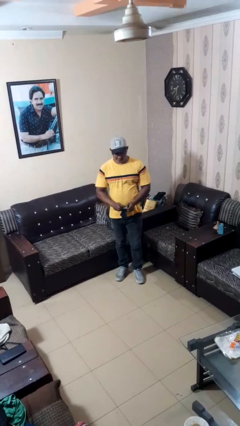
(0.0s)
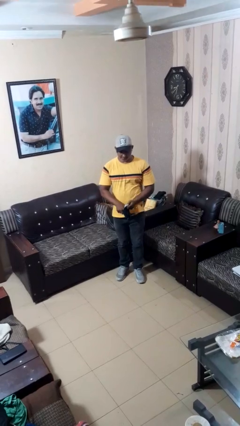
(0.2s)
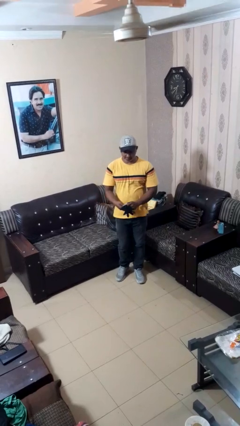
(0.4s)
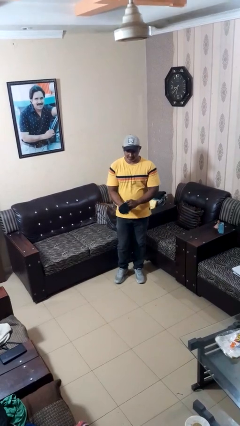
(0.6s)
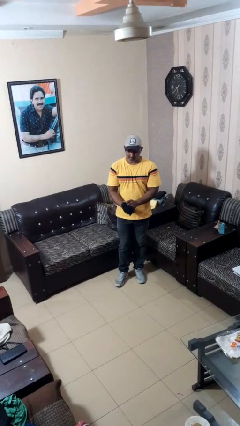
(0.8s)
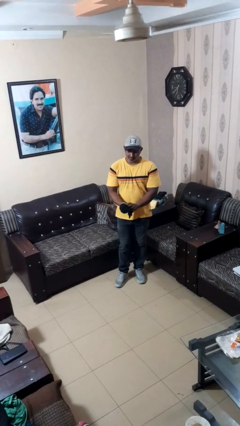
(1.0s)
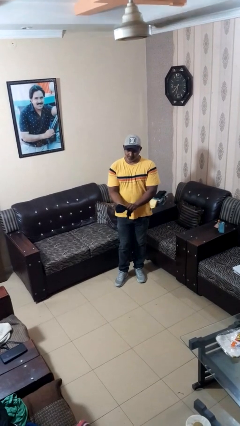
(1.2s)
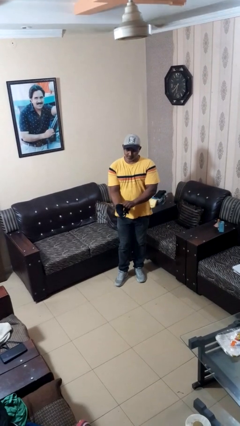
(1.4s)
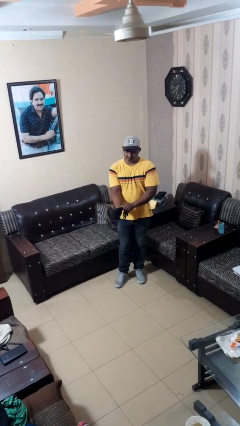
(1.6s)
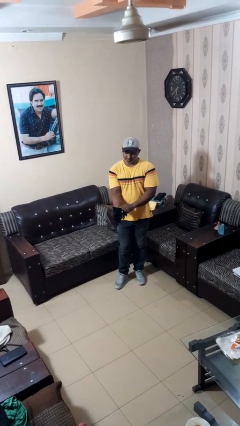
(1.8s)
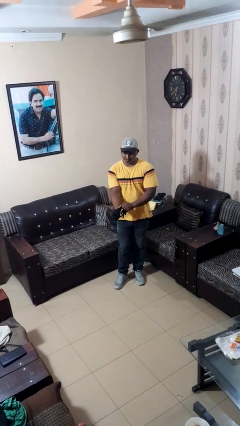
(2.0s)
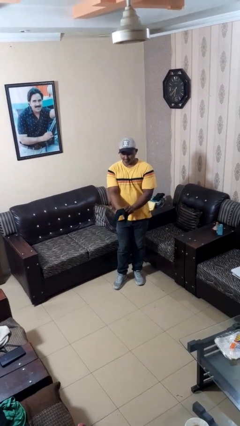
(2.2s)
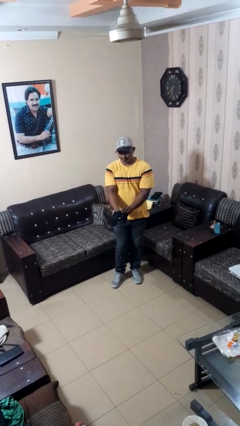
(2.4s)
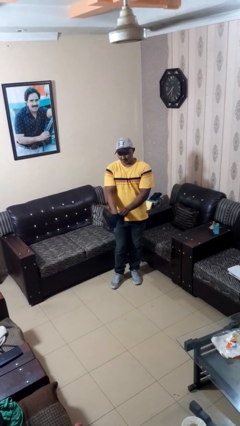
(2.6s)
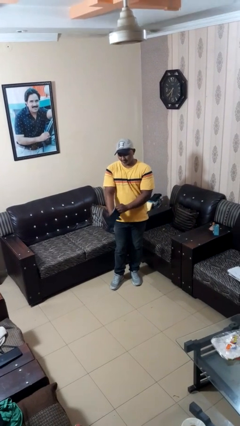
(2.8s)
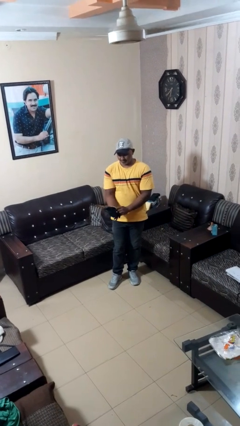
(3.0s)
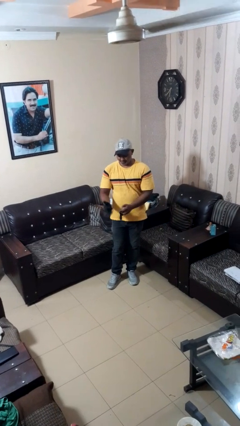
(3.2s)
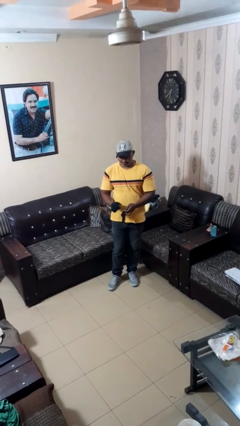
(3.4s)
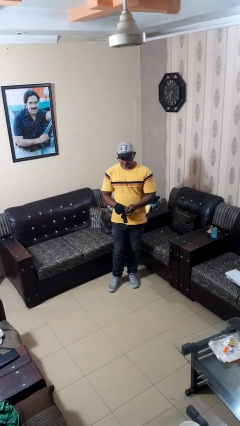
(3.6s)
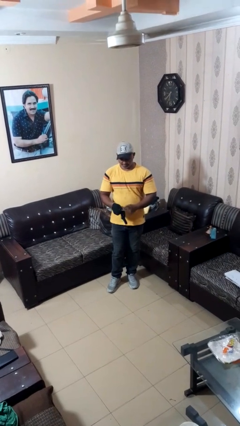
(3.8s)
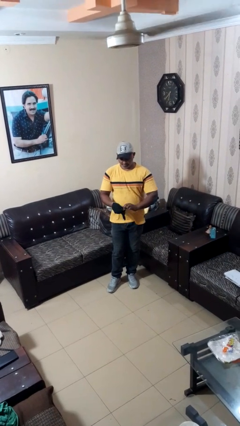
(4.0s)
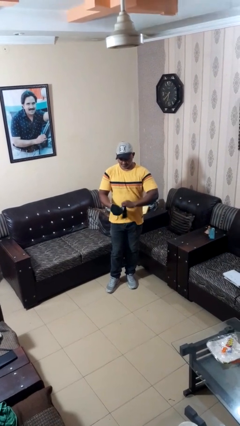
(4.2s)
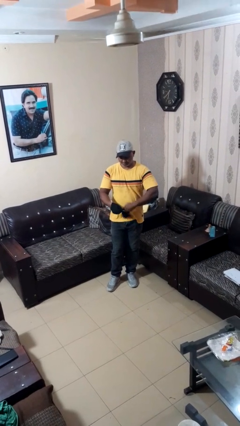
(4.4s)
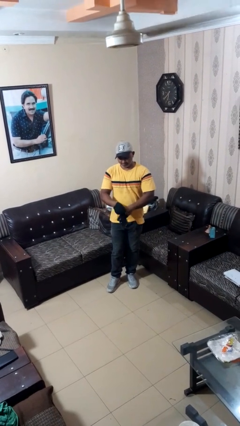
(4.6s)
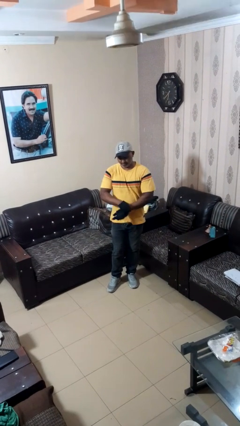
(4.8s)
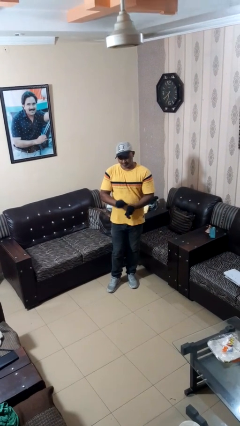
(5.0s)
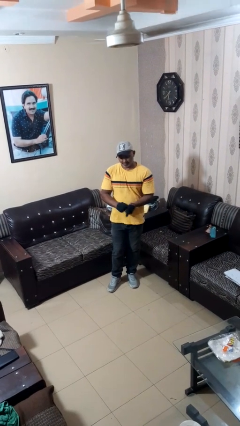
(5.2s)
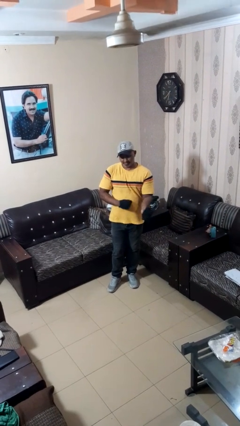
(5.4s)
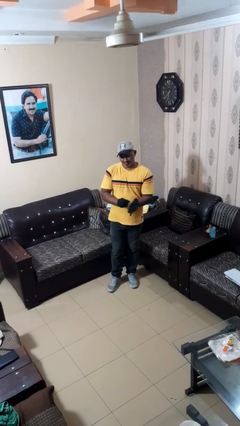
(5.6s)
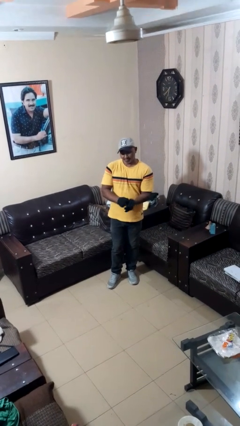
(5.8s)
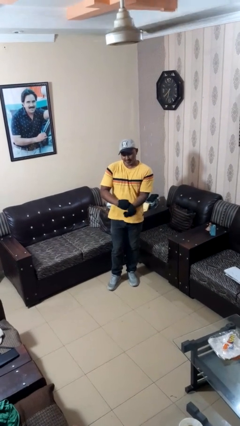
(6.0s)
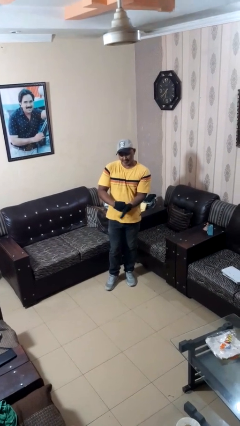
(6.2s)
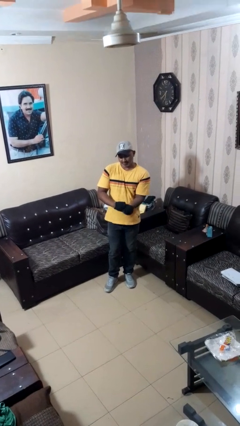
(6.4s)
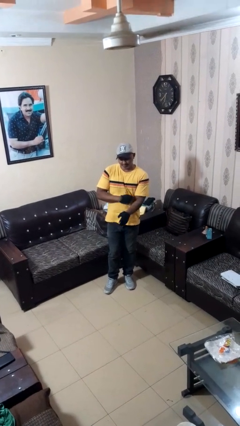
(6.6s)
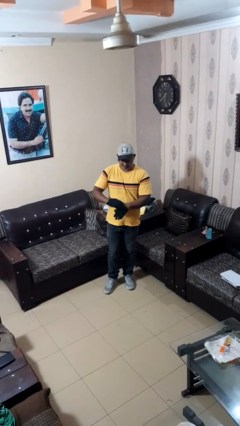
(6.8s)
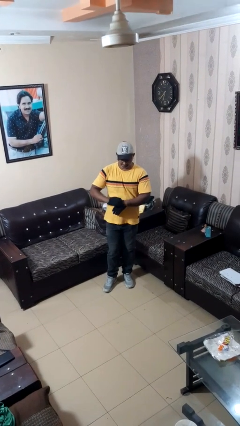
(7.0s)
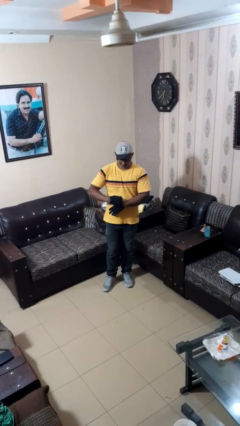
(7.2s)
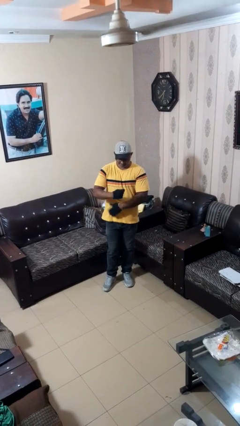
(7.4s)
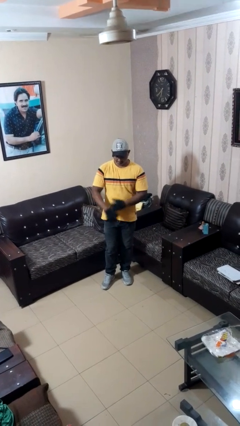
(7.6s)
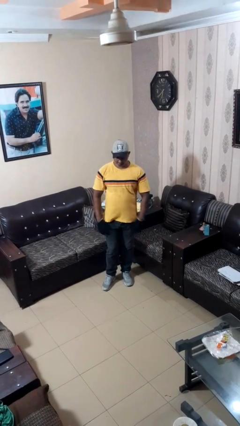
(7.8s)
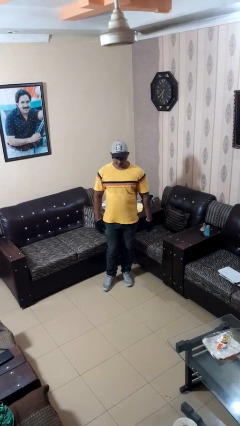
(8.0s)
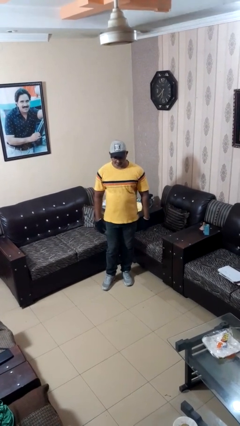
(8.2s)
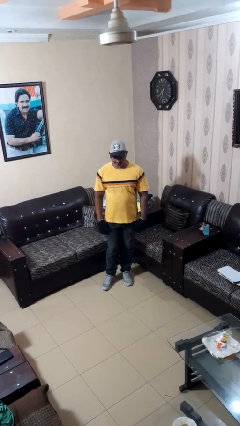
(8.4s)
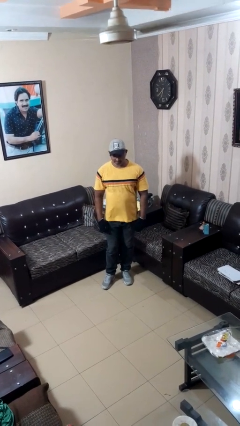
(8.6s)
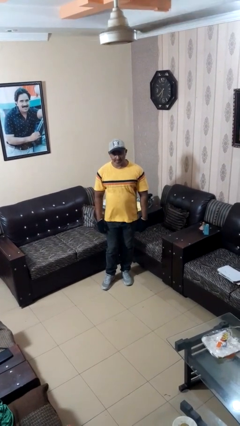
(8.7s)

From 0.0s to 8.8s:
person puts on gloves

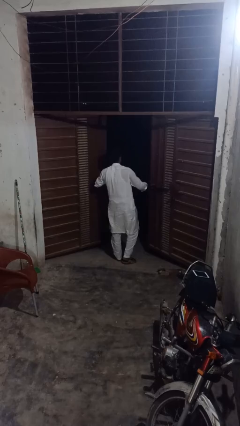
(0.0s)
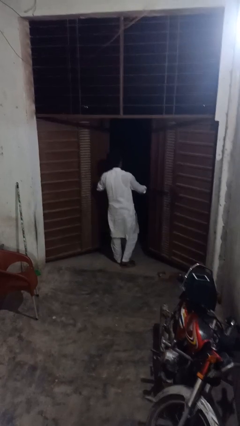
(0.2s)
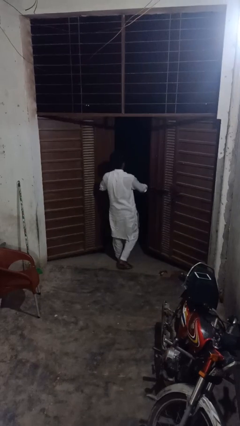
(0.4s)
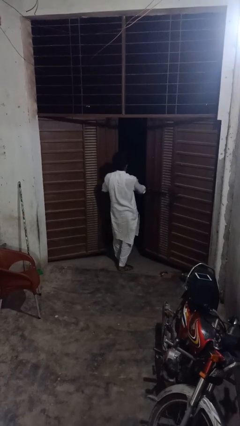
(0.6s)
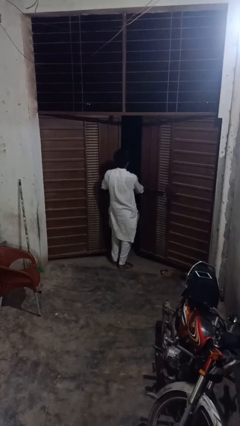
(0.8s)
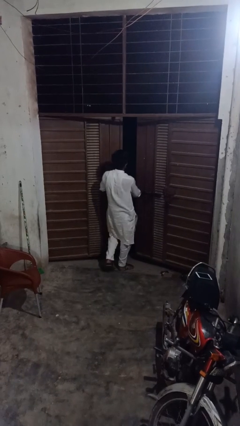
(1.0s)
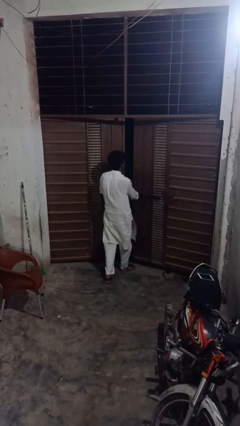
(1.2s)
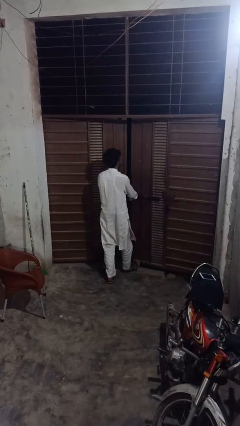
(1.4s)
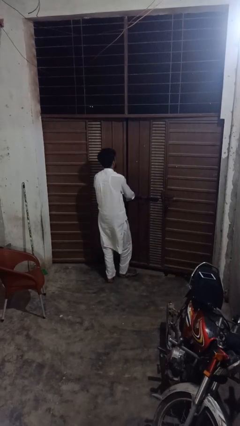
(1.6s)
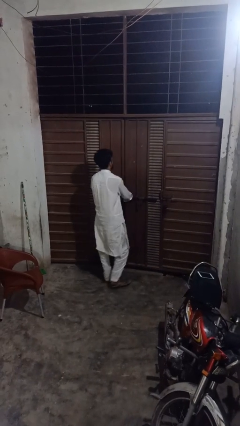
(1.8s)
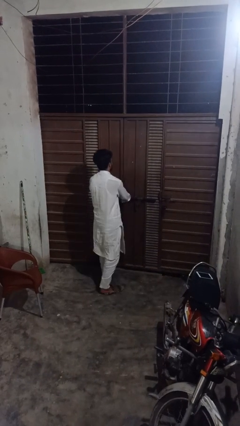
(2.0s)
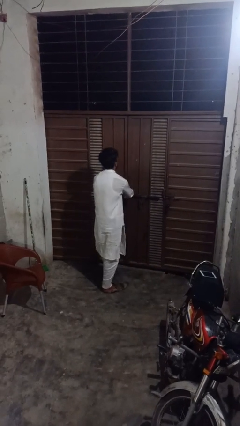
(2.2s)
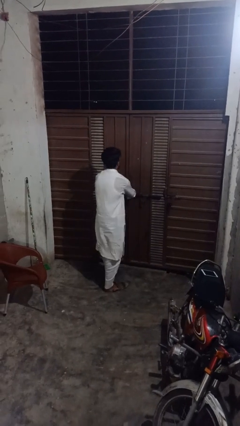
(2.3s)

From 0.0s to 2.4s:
person closes gate

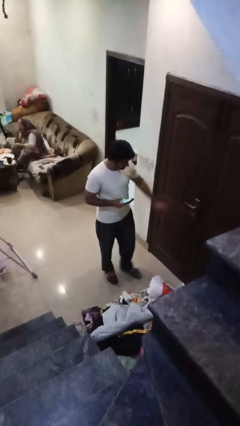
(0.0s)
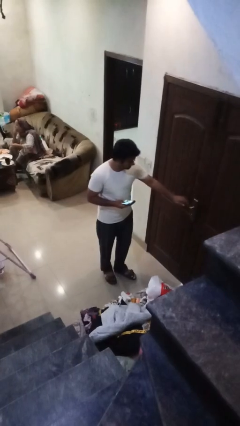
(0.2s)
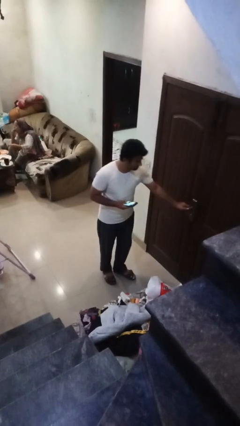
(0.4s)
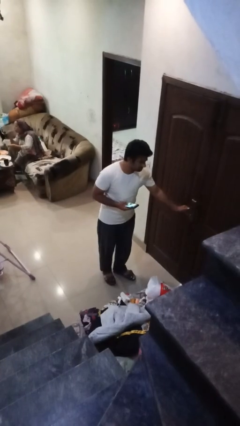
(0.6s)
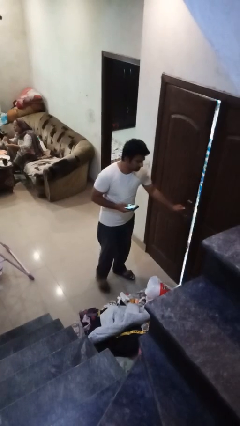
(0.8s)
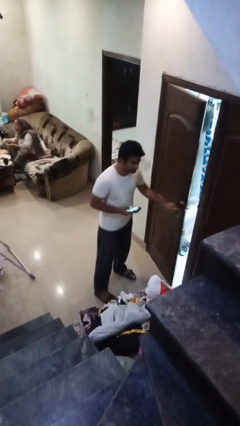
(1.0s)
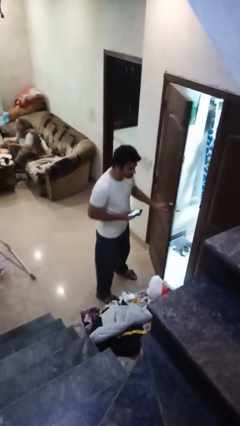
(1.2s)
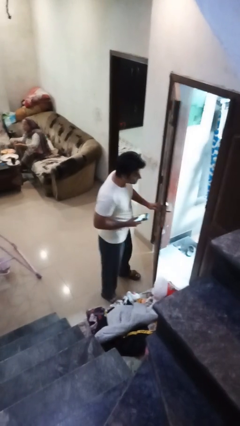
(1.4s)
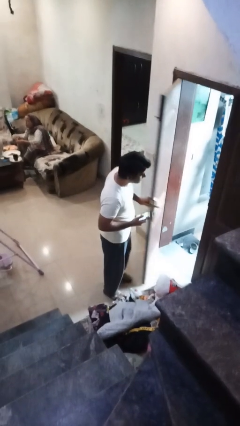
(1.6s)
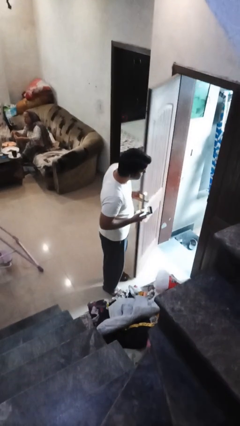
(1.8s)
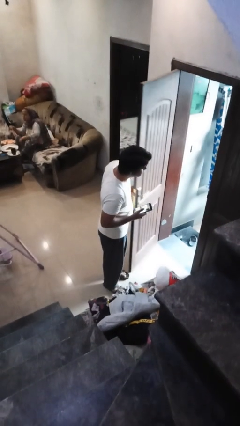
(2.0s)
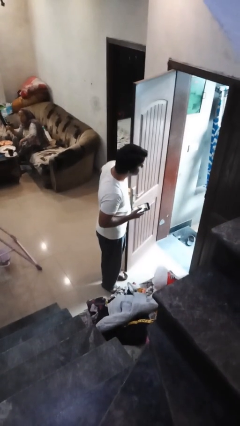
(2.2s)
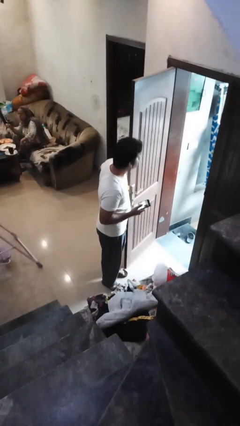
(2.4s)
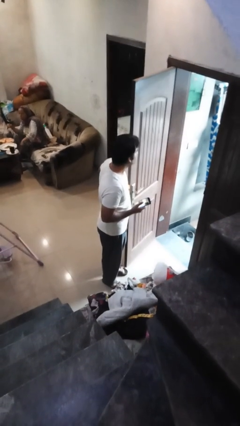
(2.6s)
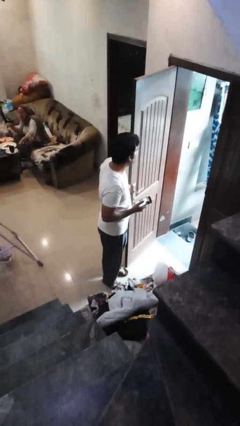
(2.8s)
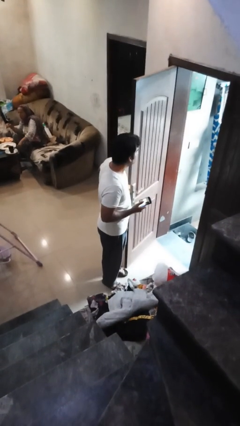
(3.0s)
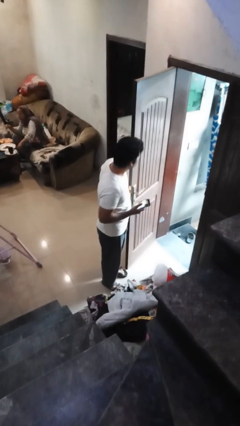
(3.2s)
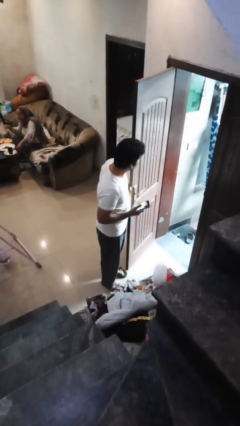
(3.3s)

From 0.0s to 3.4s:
person opens facility door

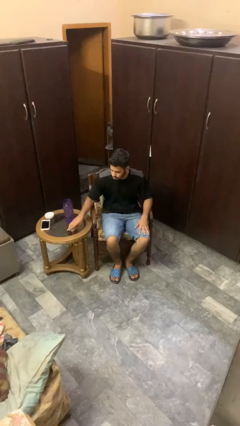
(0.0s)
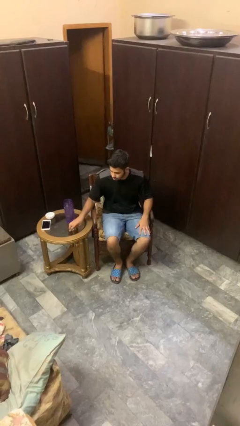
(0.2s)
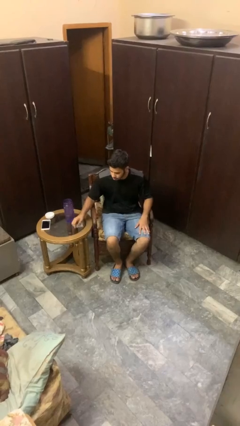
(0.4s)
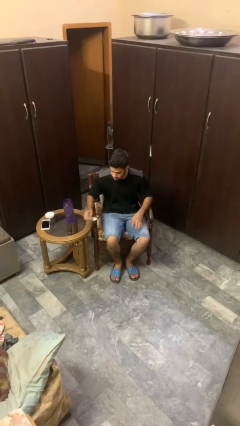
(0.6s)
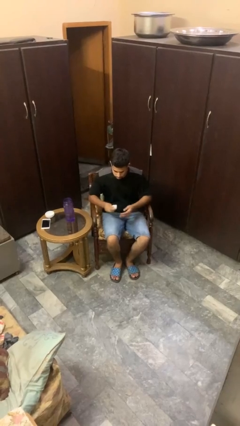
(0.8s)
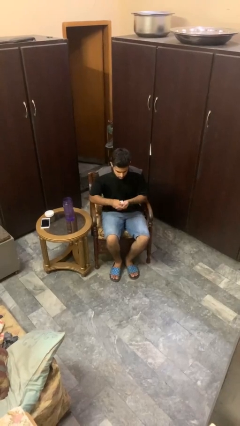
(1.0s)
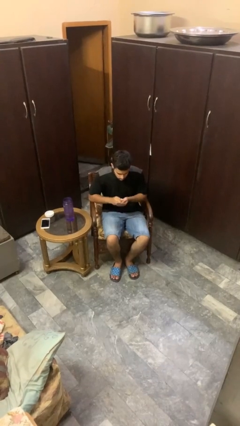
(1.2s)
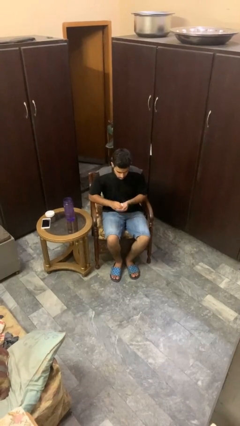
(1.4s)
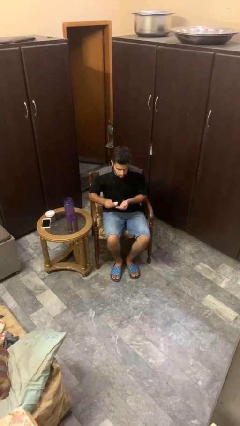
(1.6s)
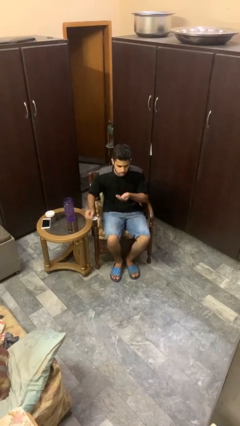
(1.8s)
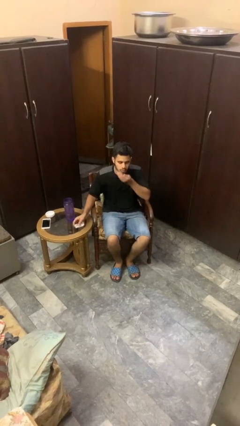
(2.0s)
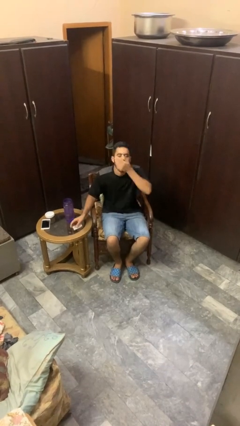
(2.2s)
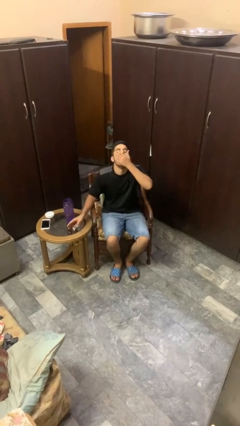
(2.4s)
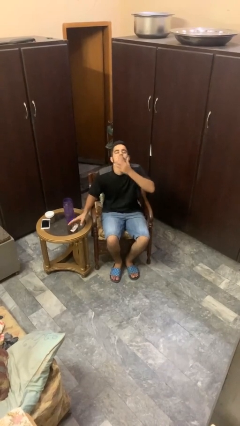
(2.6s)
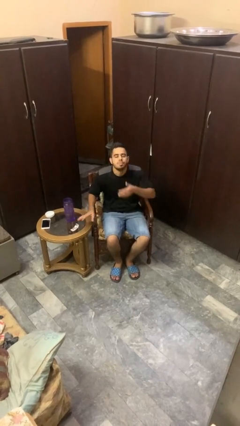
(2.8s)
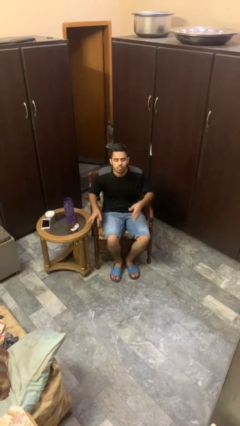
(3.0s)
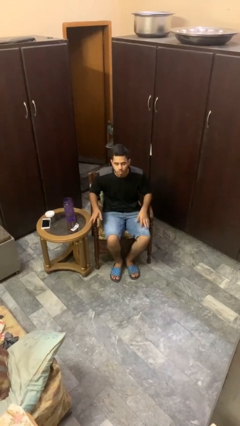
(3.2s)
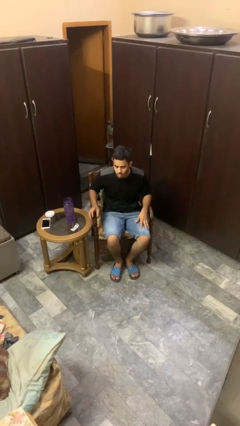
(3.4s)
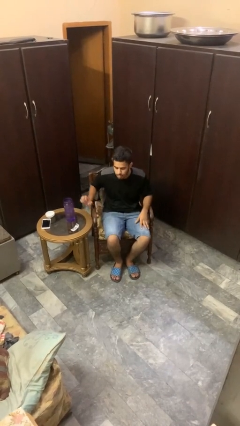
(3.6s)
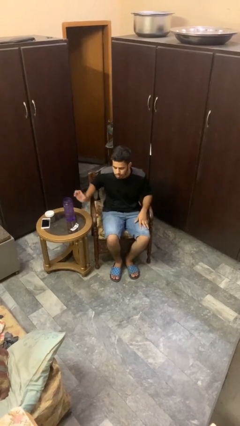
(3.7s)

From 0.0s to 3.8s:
person takes medicine pills
